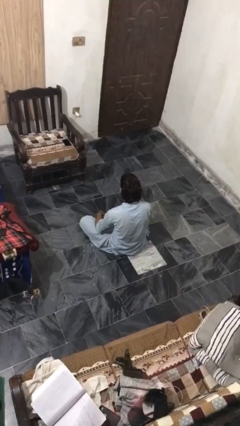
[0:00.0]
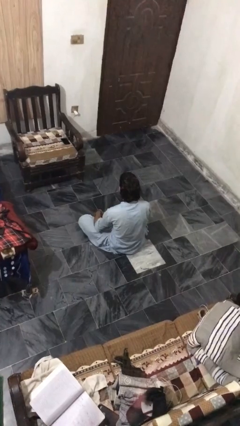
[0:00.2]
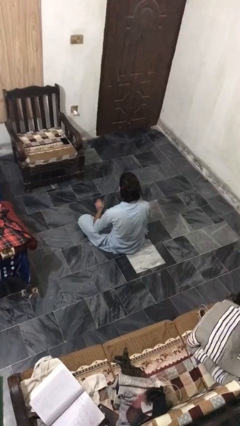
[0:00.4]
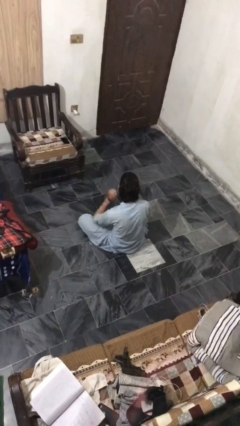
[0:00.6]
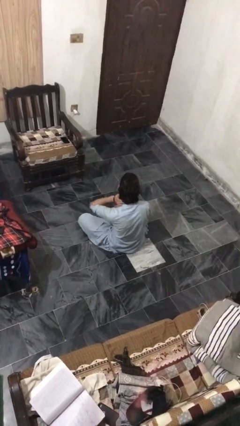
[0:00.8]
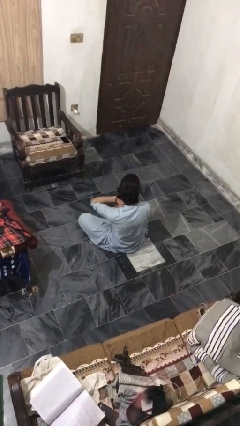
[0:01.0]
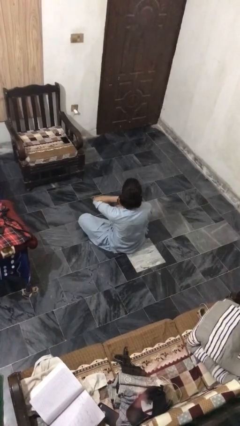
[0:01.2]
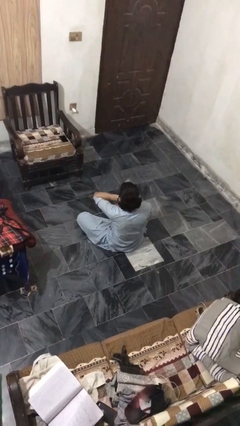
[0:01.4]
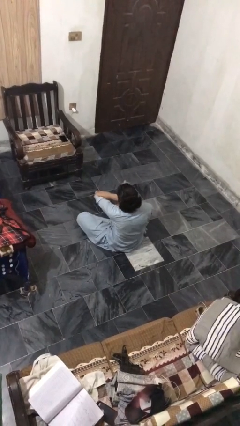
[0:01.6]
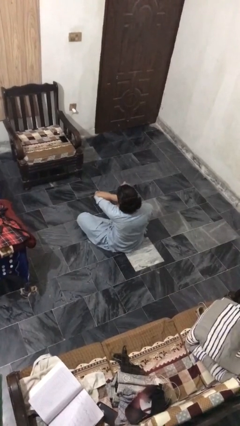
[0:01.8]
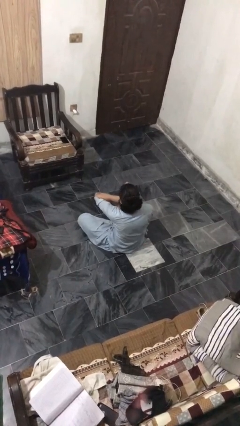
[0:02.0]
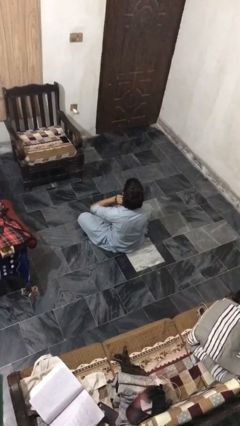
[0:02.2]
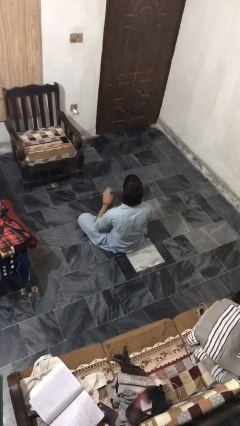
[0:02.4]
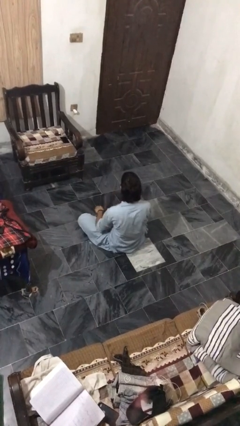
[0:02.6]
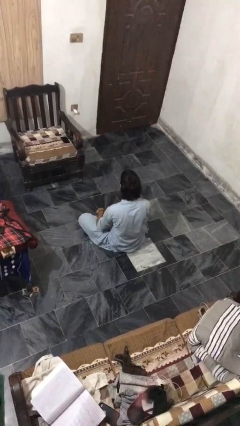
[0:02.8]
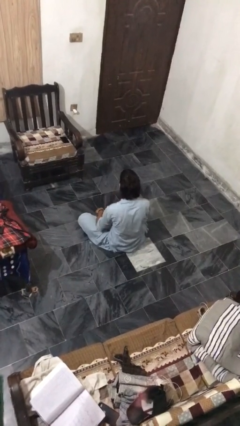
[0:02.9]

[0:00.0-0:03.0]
person rubs neck

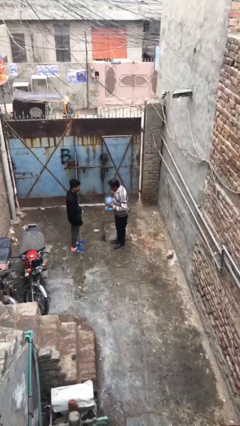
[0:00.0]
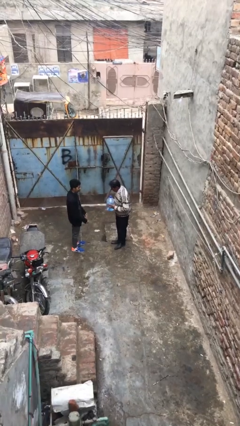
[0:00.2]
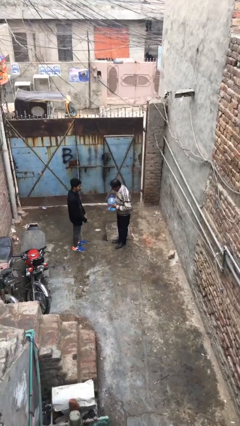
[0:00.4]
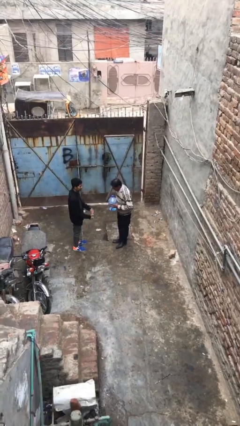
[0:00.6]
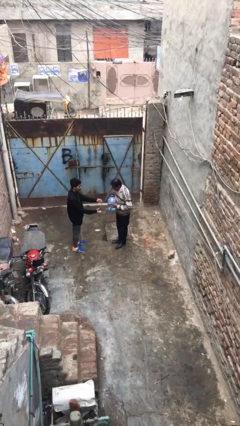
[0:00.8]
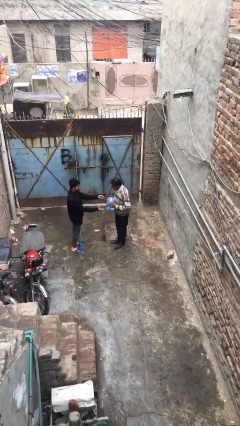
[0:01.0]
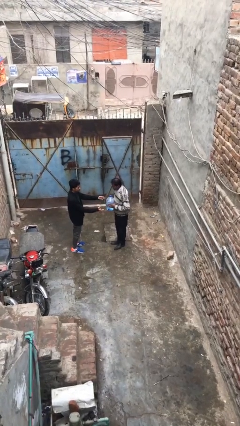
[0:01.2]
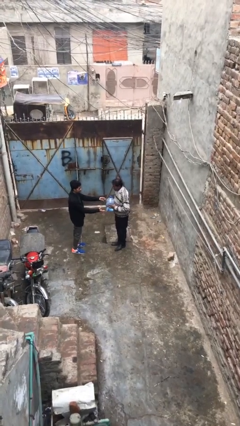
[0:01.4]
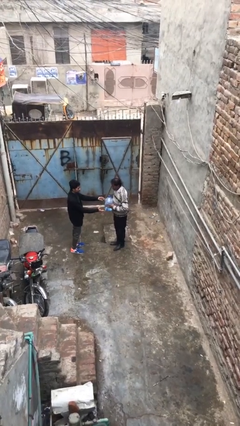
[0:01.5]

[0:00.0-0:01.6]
person transfers object to person

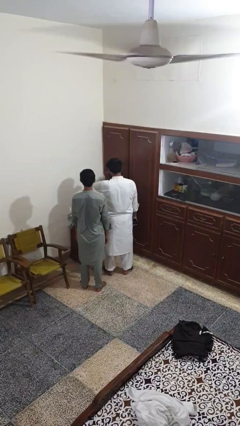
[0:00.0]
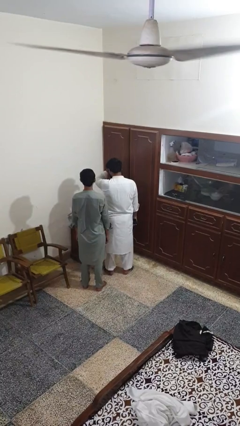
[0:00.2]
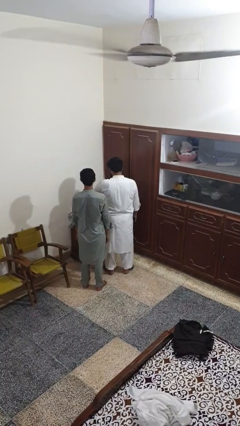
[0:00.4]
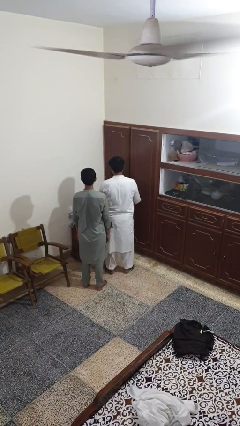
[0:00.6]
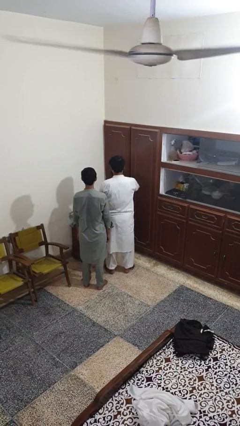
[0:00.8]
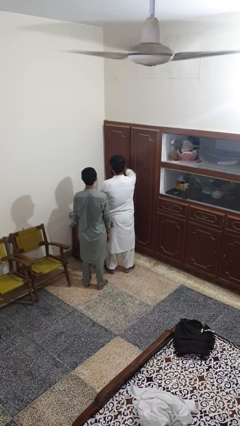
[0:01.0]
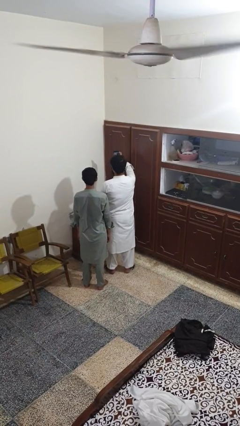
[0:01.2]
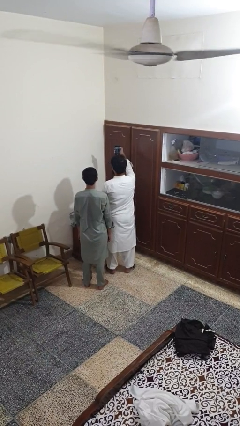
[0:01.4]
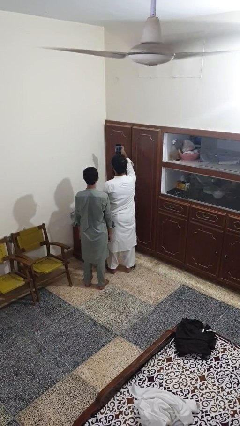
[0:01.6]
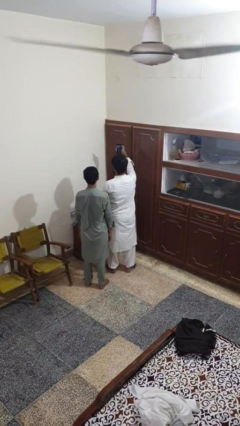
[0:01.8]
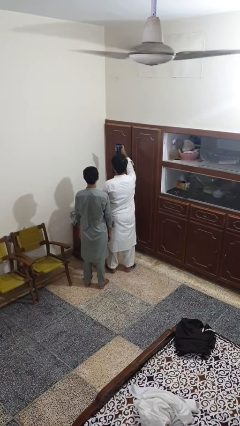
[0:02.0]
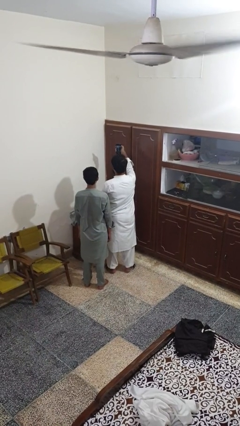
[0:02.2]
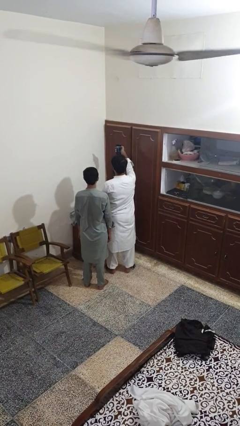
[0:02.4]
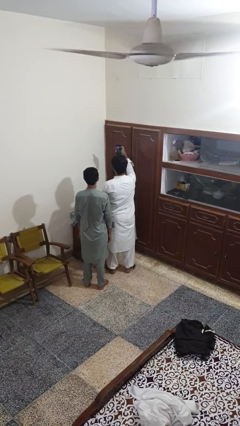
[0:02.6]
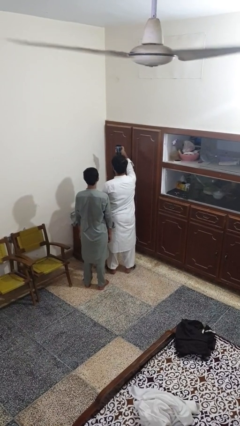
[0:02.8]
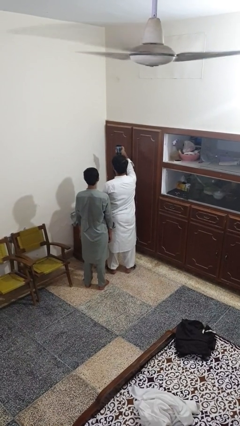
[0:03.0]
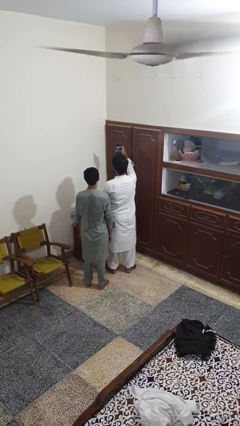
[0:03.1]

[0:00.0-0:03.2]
person takes selfie with person

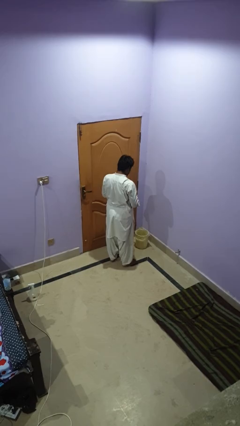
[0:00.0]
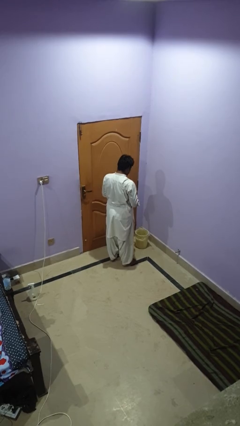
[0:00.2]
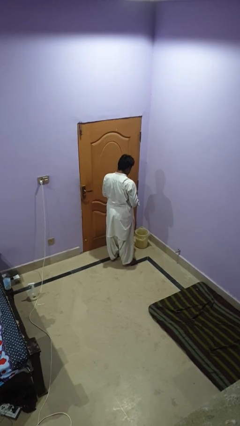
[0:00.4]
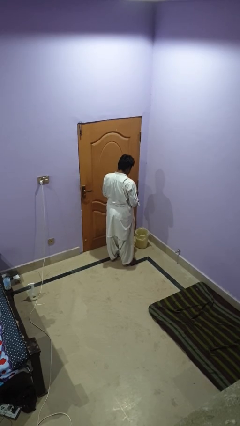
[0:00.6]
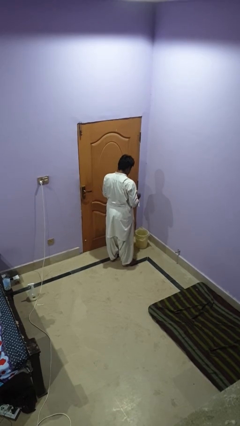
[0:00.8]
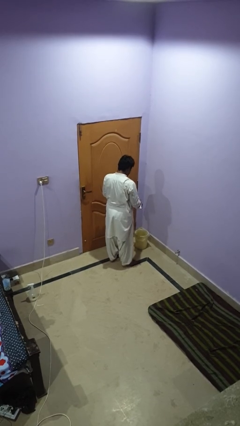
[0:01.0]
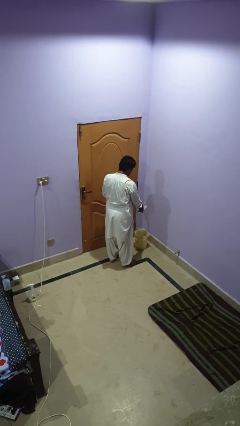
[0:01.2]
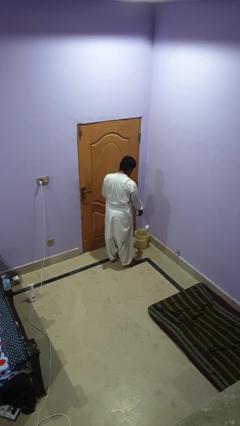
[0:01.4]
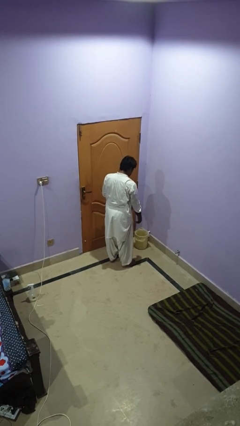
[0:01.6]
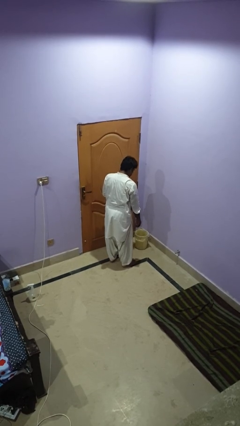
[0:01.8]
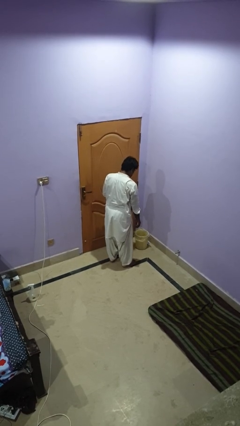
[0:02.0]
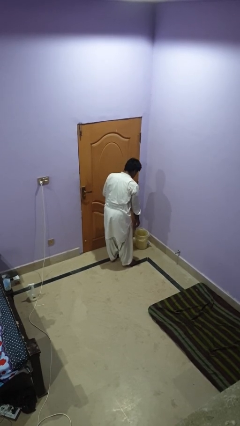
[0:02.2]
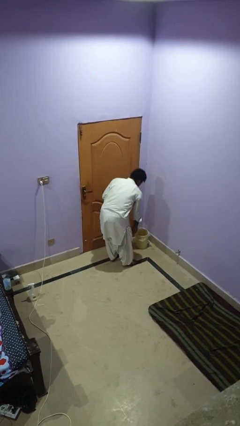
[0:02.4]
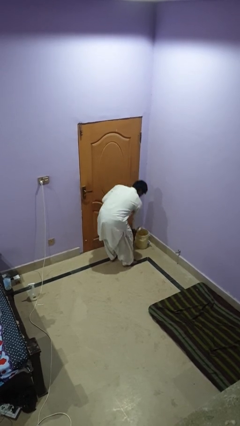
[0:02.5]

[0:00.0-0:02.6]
person discards trash

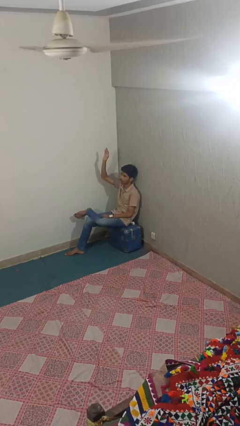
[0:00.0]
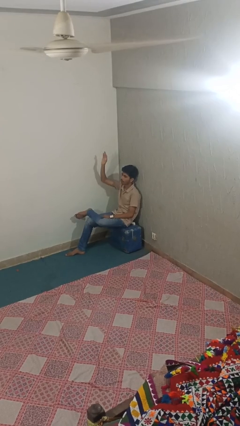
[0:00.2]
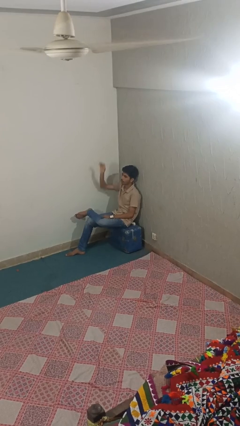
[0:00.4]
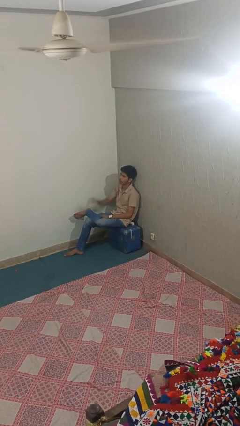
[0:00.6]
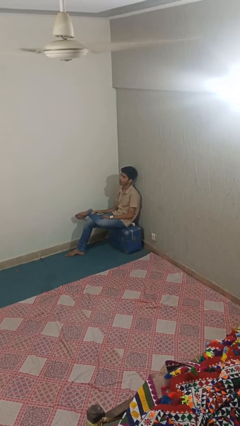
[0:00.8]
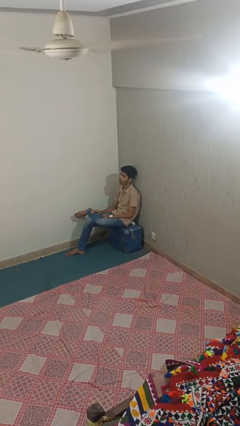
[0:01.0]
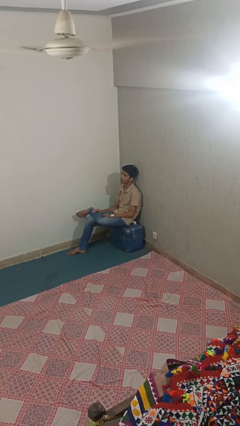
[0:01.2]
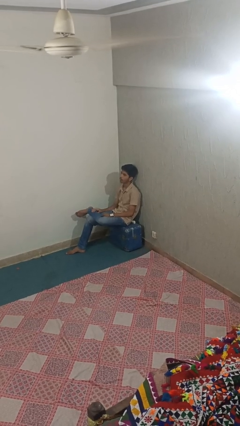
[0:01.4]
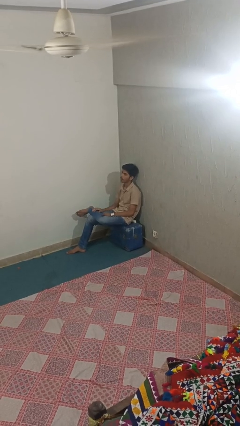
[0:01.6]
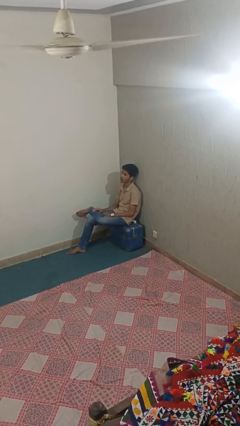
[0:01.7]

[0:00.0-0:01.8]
person gestures lower hand

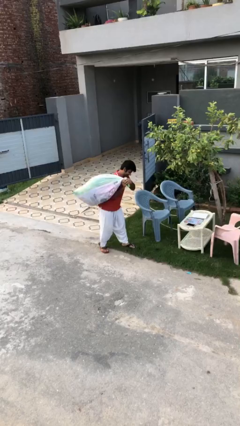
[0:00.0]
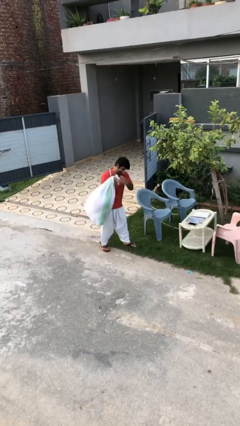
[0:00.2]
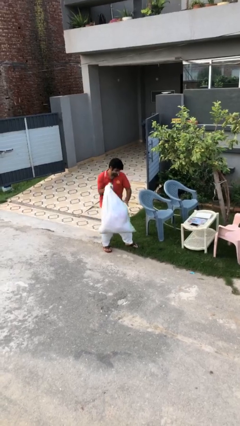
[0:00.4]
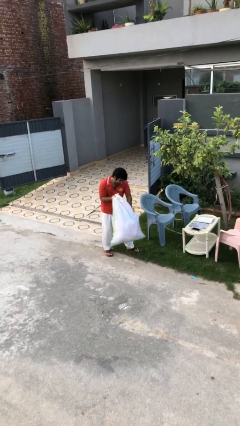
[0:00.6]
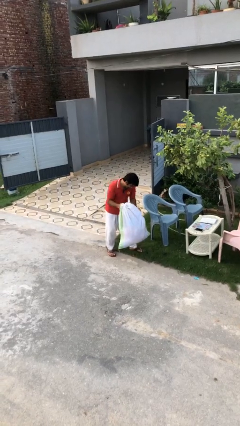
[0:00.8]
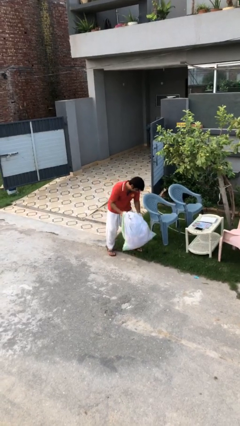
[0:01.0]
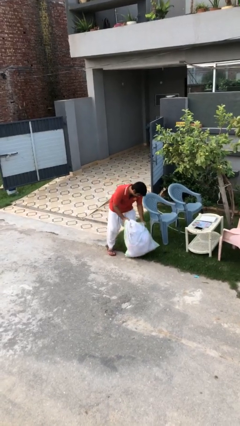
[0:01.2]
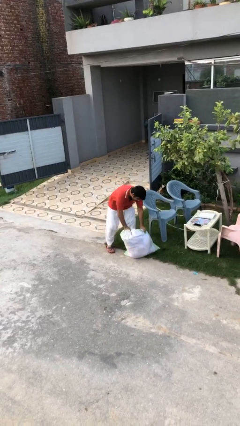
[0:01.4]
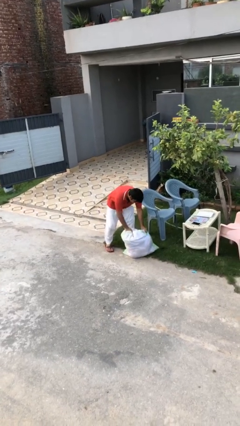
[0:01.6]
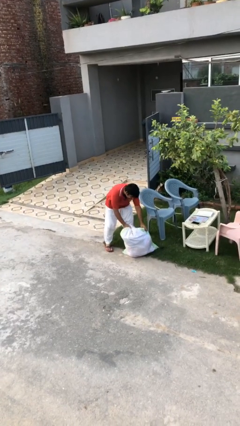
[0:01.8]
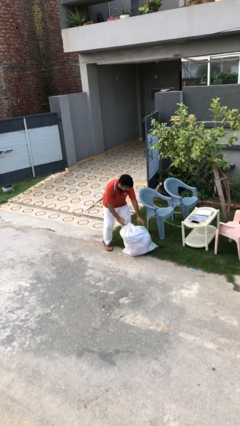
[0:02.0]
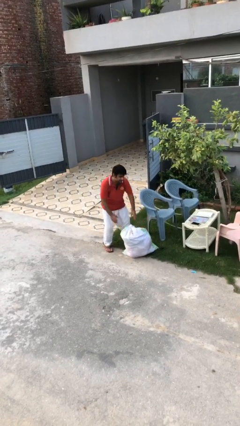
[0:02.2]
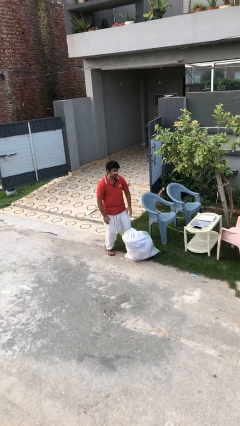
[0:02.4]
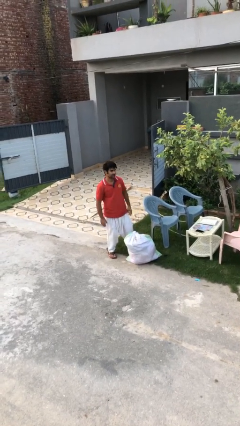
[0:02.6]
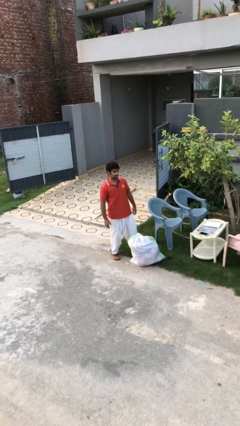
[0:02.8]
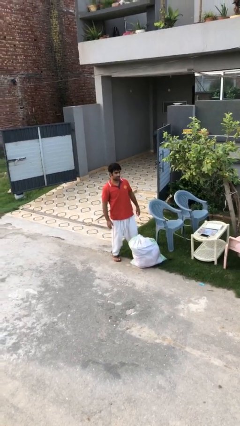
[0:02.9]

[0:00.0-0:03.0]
person puts down object on floor

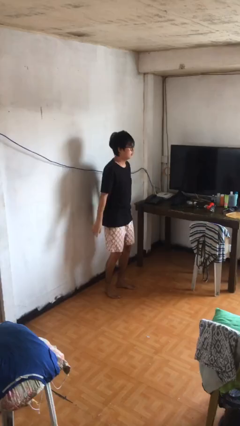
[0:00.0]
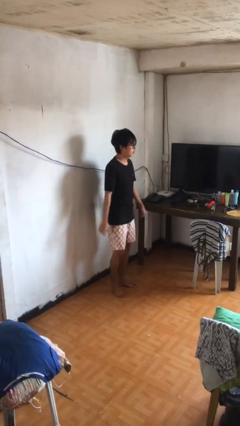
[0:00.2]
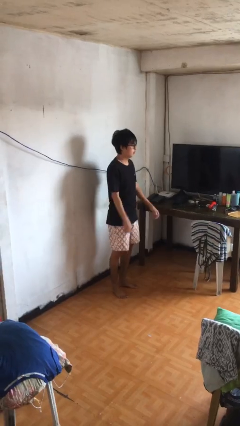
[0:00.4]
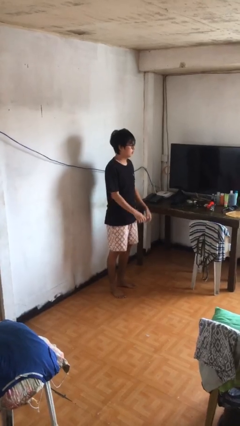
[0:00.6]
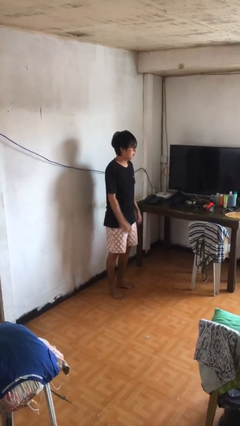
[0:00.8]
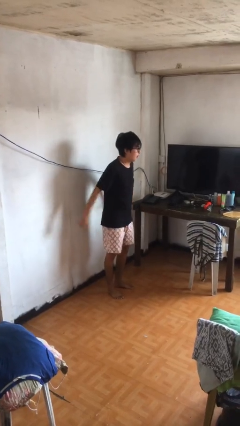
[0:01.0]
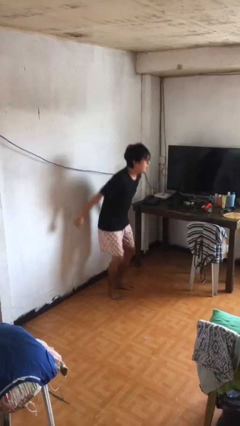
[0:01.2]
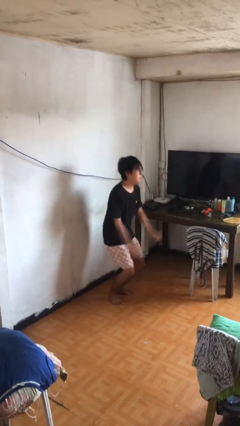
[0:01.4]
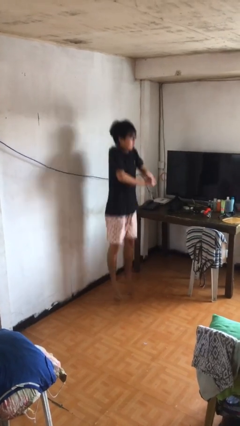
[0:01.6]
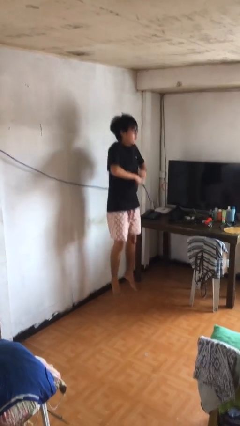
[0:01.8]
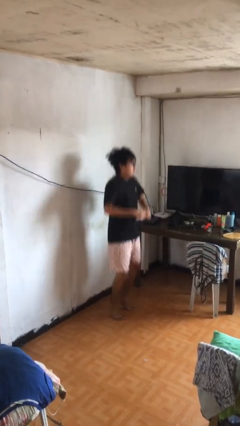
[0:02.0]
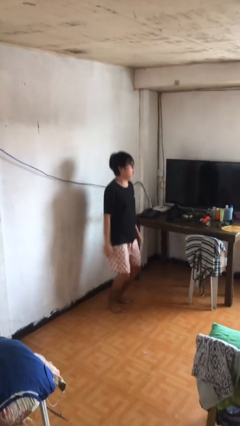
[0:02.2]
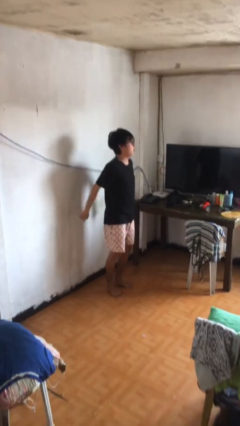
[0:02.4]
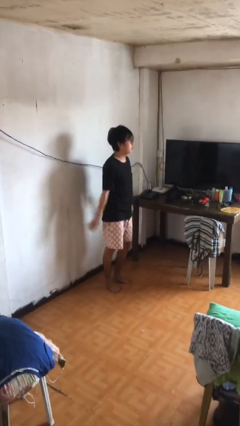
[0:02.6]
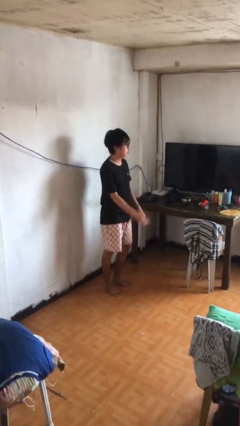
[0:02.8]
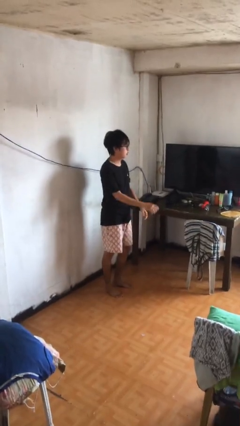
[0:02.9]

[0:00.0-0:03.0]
person jumps
